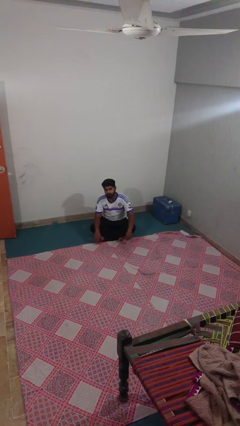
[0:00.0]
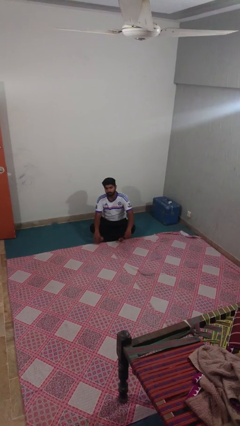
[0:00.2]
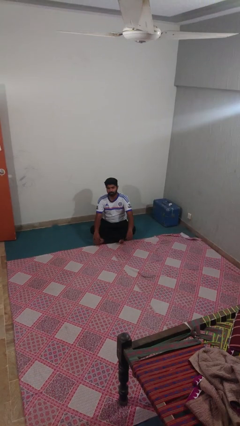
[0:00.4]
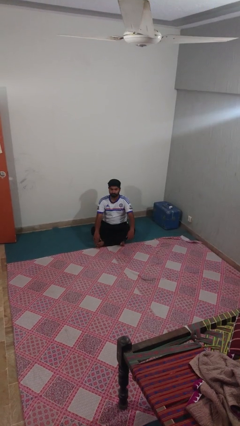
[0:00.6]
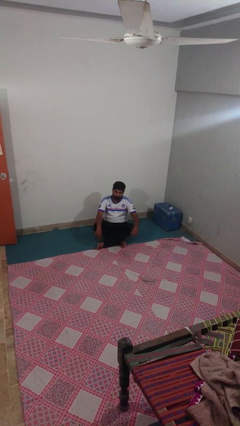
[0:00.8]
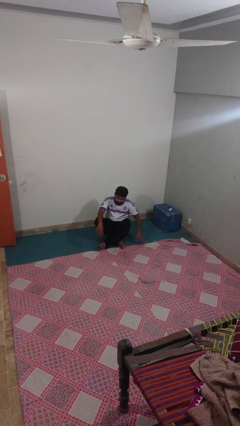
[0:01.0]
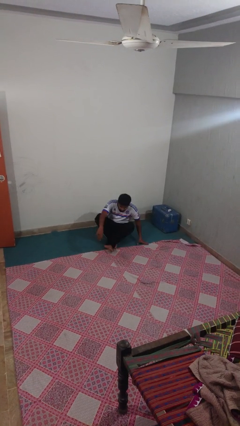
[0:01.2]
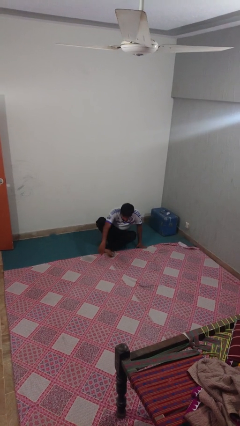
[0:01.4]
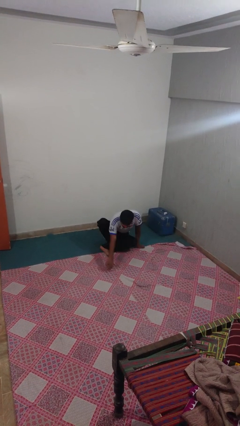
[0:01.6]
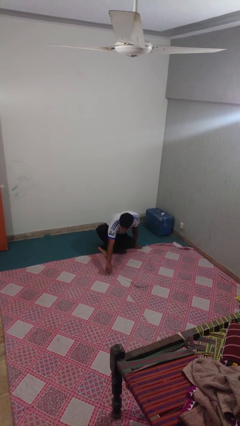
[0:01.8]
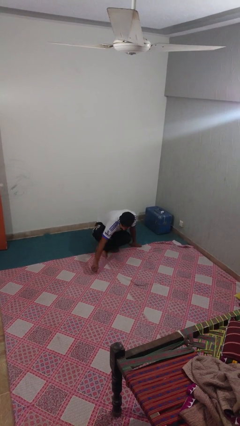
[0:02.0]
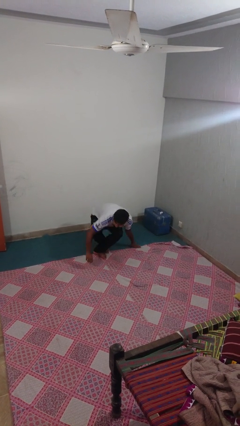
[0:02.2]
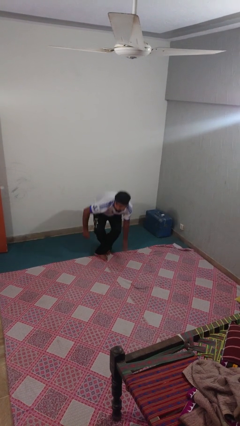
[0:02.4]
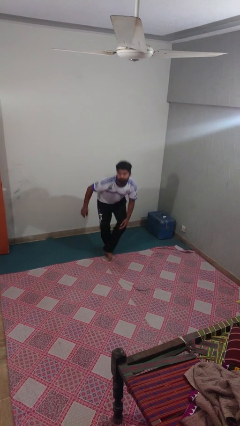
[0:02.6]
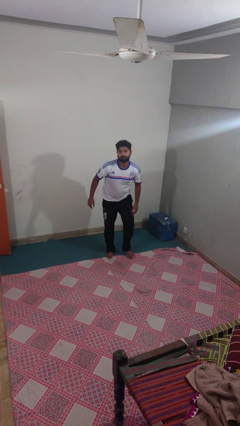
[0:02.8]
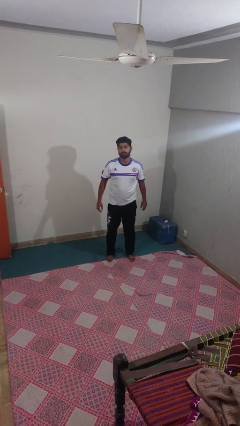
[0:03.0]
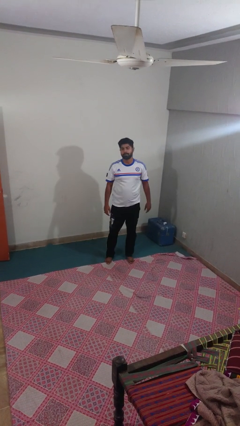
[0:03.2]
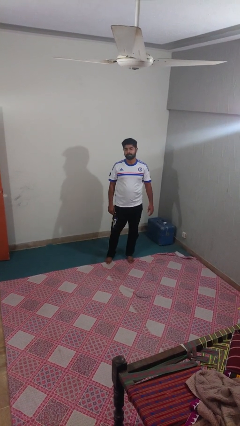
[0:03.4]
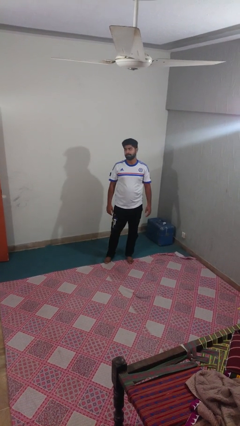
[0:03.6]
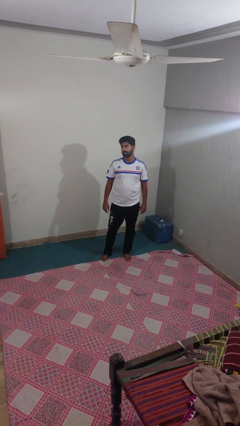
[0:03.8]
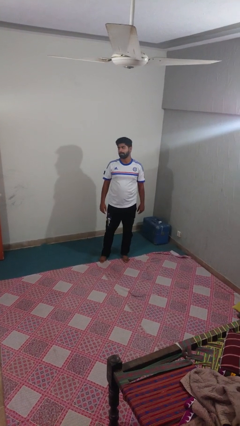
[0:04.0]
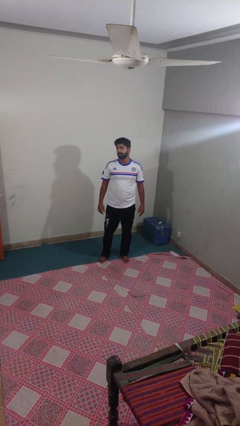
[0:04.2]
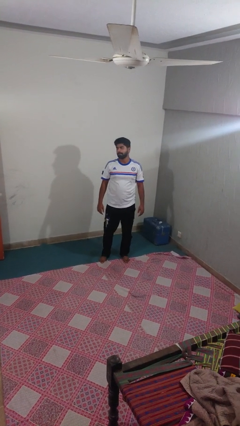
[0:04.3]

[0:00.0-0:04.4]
person stands up from floor

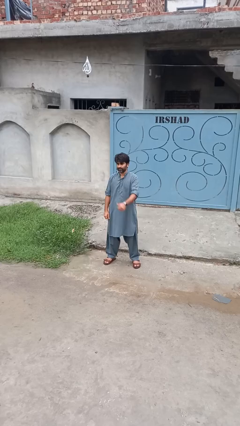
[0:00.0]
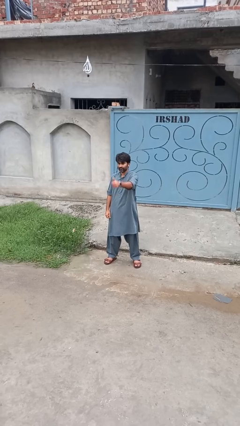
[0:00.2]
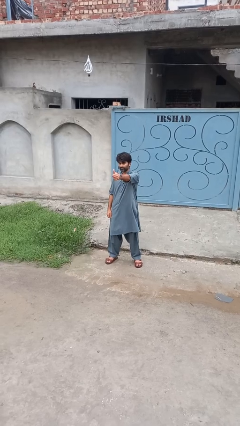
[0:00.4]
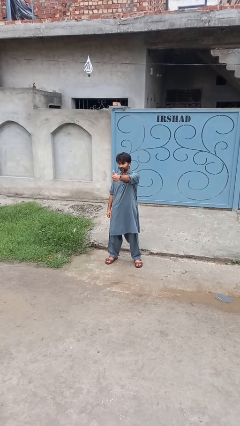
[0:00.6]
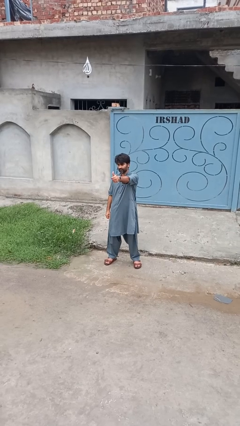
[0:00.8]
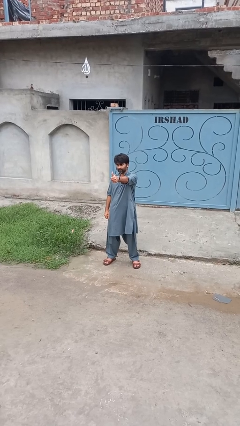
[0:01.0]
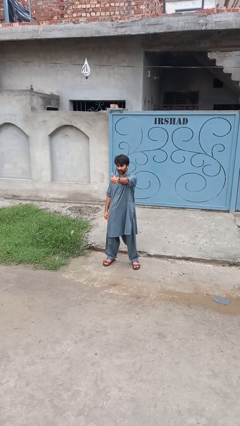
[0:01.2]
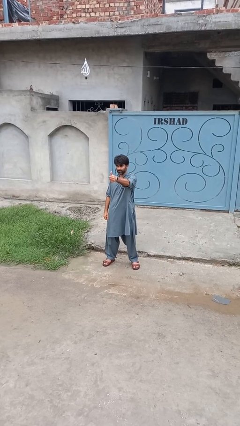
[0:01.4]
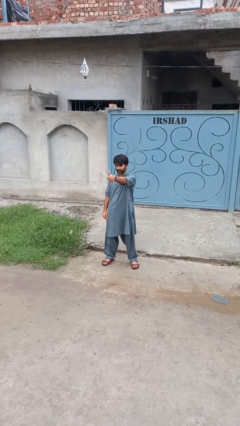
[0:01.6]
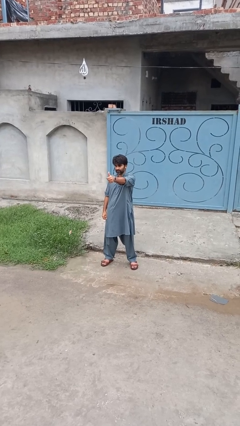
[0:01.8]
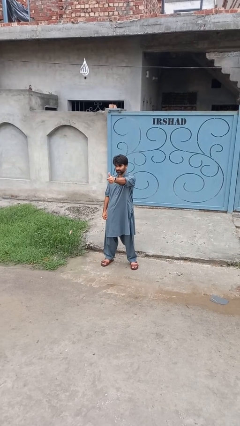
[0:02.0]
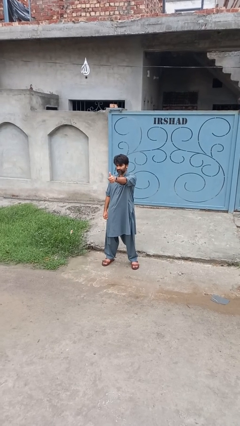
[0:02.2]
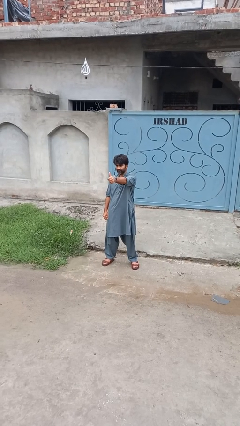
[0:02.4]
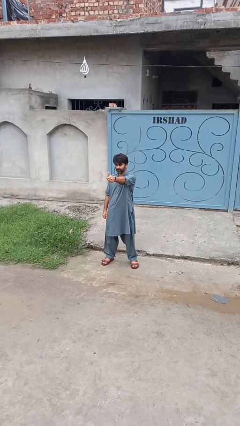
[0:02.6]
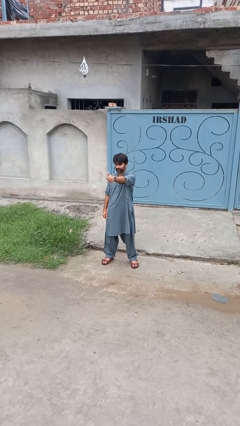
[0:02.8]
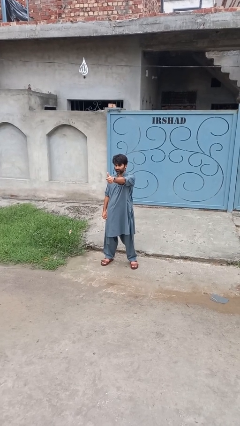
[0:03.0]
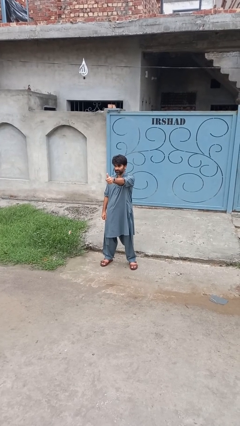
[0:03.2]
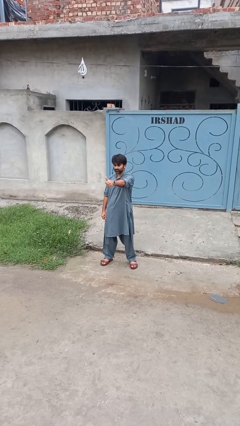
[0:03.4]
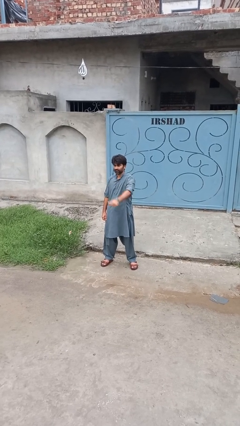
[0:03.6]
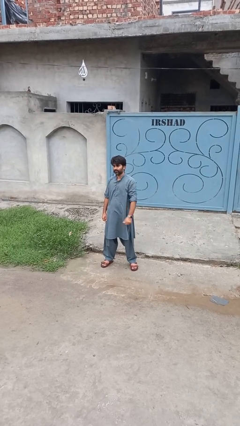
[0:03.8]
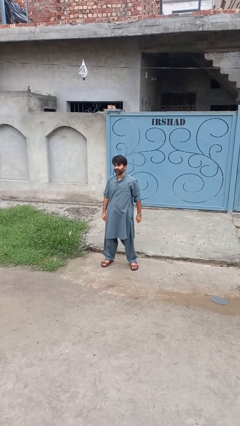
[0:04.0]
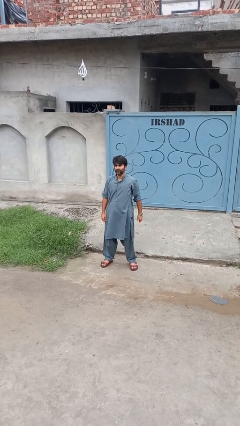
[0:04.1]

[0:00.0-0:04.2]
person gestures thumbs up

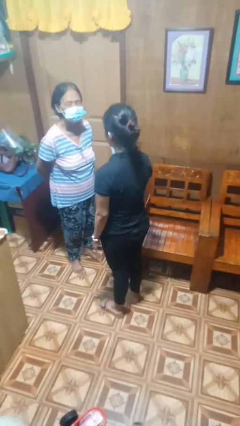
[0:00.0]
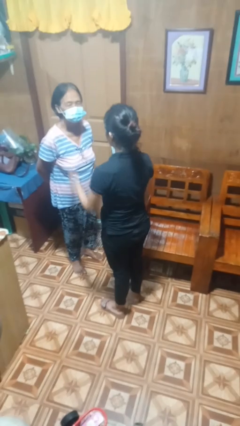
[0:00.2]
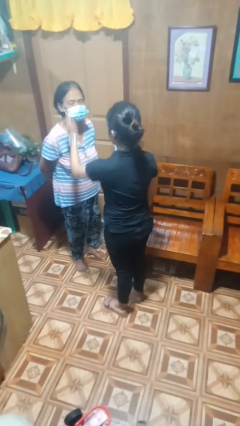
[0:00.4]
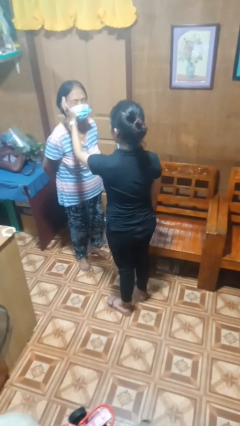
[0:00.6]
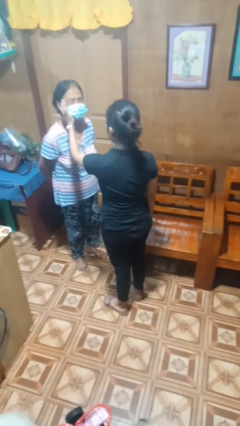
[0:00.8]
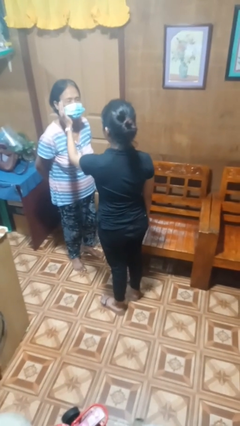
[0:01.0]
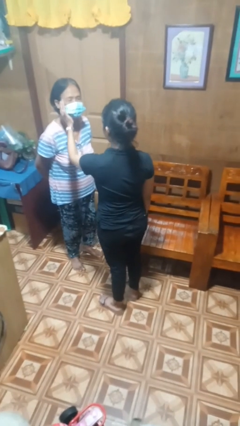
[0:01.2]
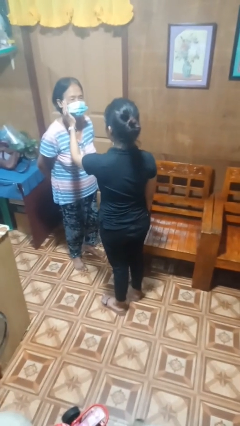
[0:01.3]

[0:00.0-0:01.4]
person touches face of person

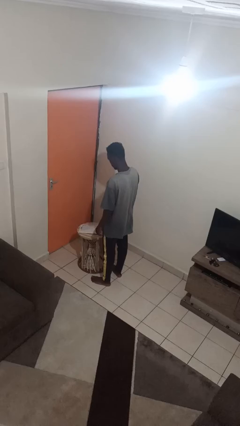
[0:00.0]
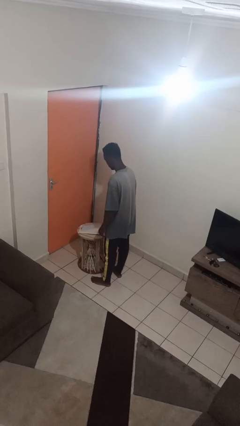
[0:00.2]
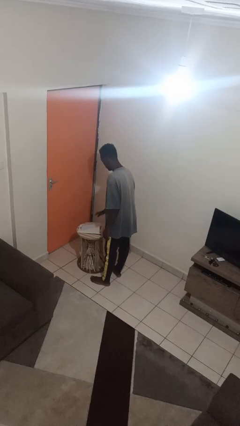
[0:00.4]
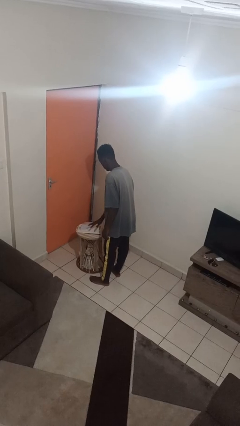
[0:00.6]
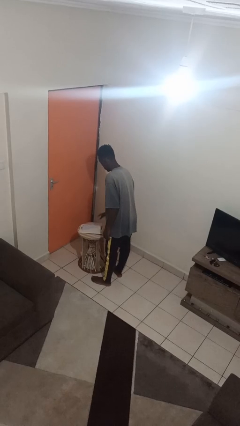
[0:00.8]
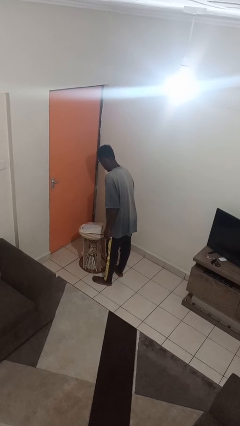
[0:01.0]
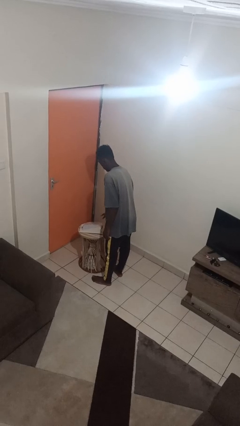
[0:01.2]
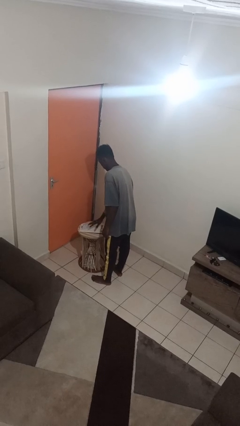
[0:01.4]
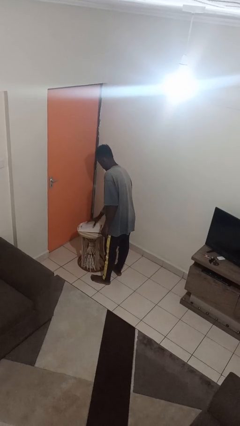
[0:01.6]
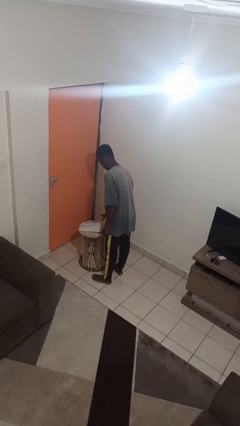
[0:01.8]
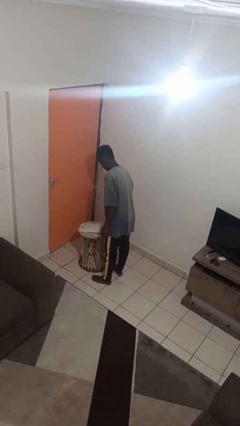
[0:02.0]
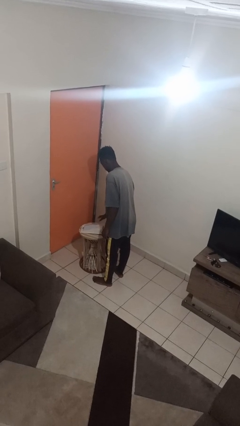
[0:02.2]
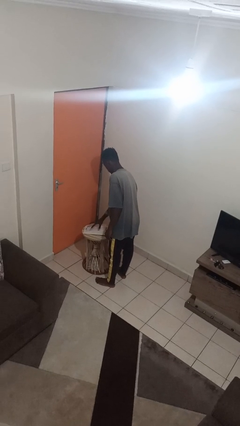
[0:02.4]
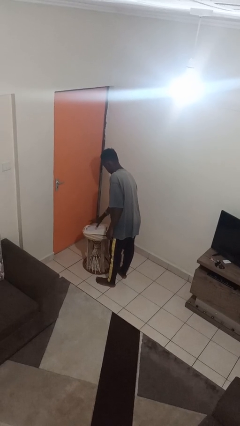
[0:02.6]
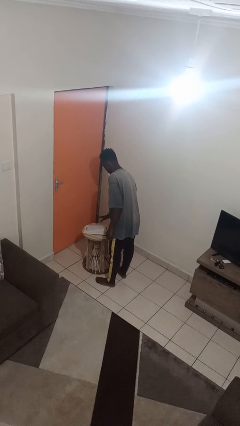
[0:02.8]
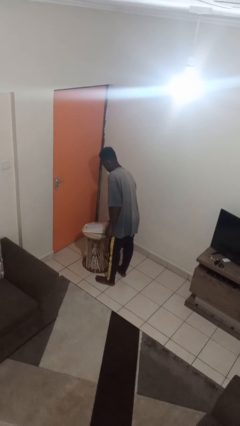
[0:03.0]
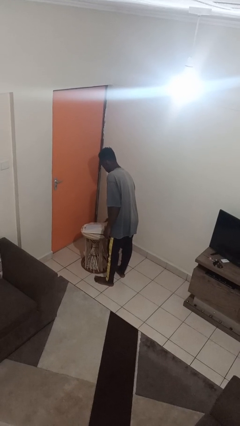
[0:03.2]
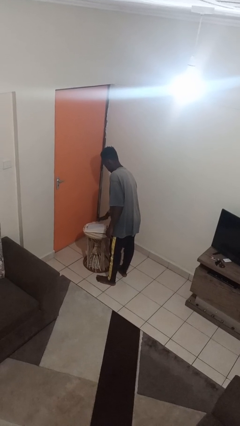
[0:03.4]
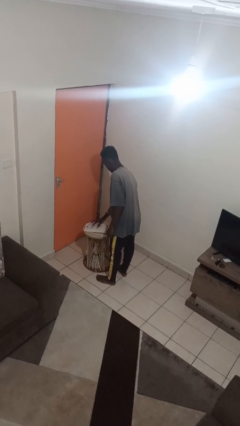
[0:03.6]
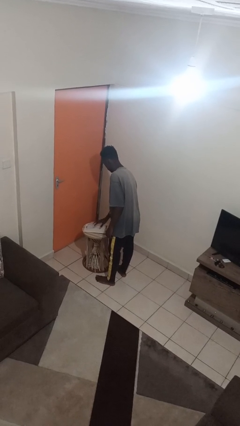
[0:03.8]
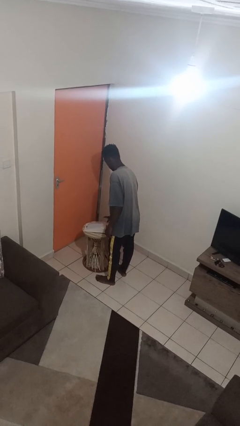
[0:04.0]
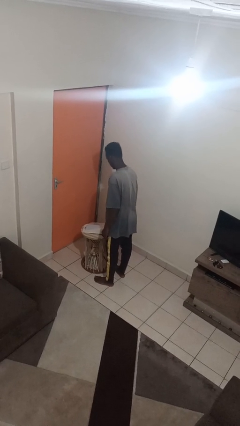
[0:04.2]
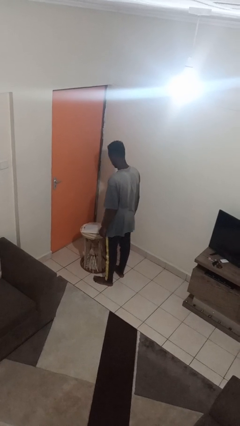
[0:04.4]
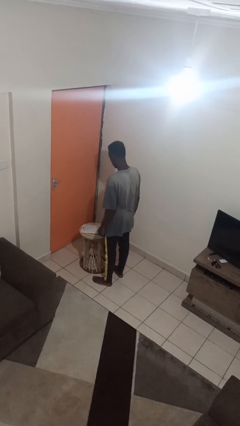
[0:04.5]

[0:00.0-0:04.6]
person waves hand over object

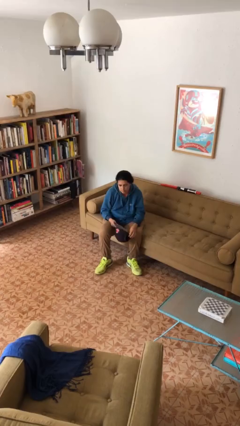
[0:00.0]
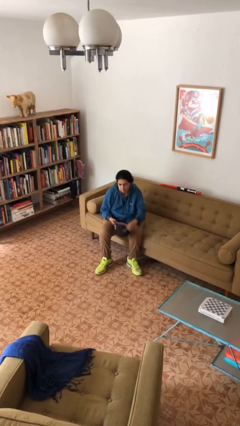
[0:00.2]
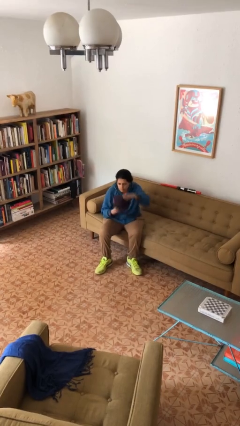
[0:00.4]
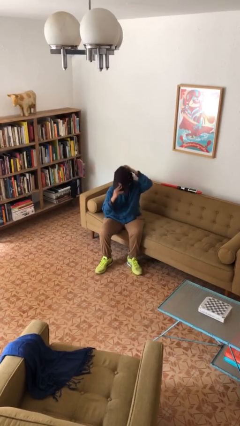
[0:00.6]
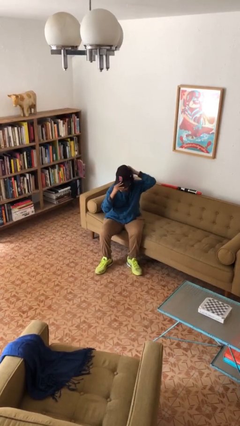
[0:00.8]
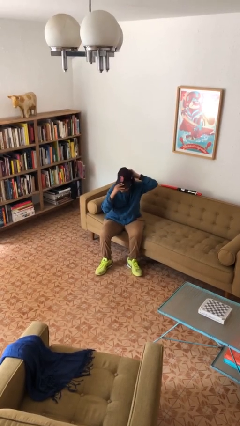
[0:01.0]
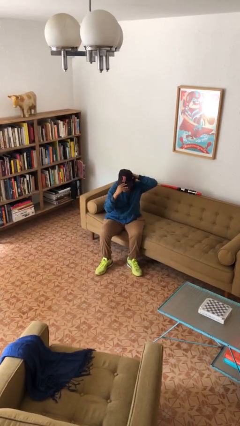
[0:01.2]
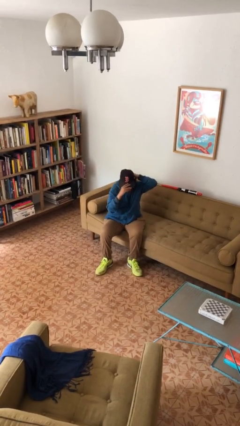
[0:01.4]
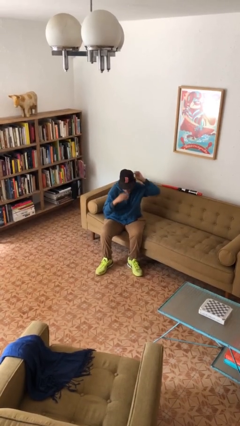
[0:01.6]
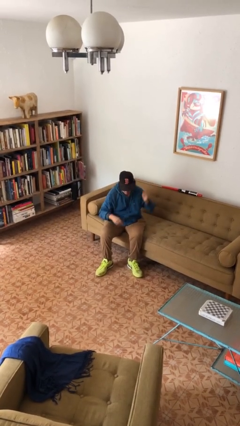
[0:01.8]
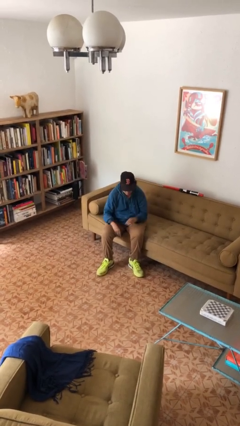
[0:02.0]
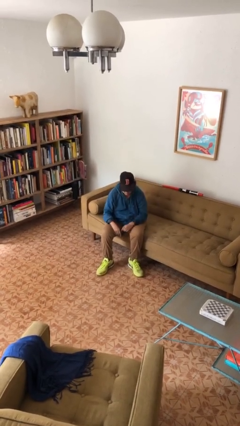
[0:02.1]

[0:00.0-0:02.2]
person puts on hat

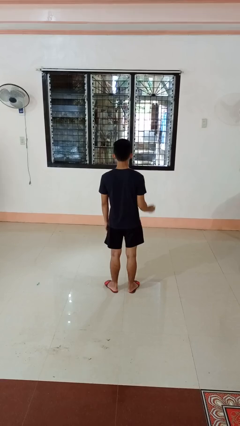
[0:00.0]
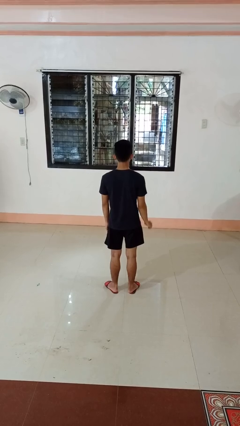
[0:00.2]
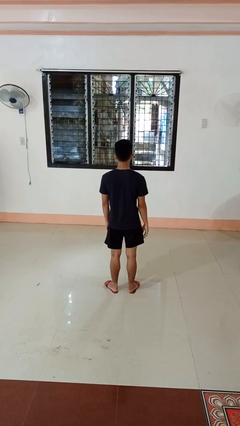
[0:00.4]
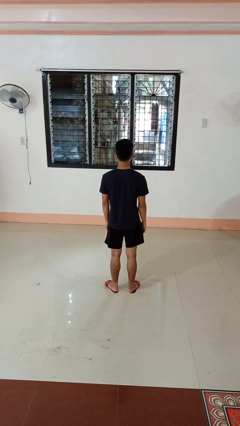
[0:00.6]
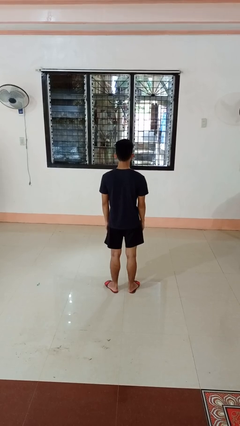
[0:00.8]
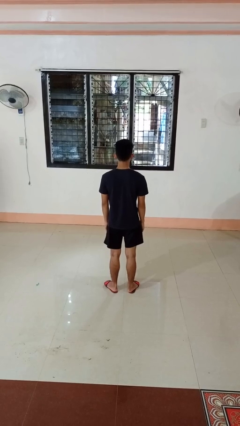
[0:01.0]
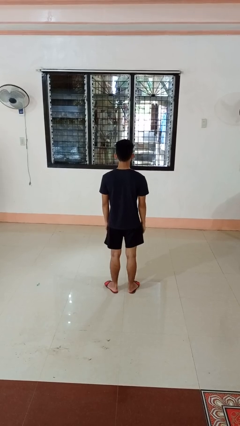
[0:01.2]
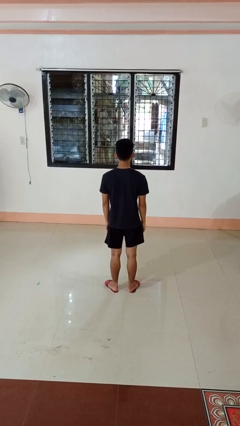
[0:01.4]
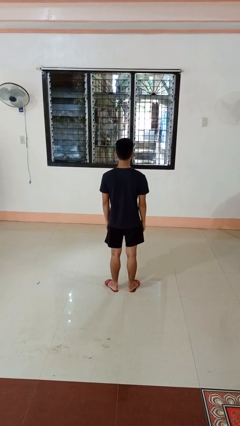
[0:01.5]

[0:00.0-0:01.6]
person gestures lower hand
